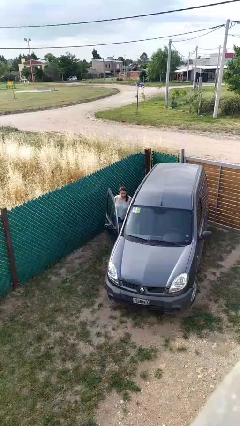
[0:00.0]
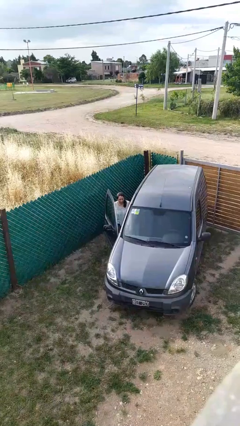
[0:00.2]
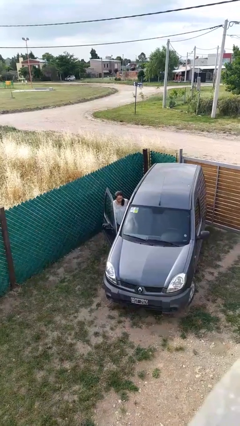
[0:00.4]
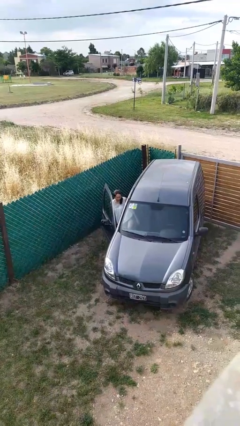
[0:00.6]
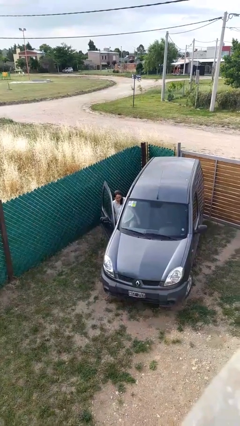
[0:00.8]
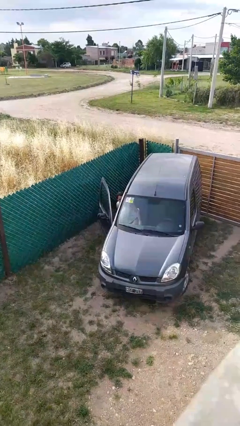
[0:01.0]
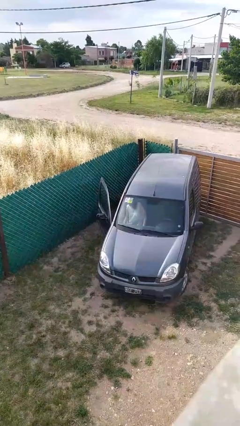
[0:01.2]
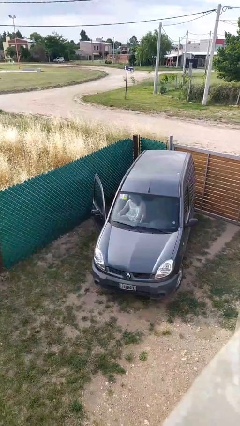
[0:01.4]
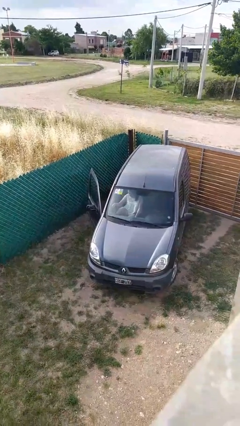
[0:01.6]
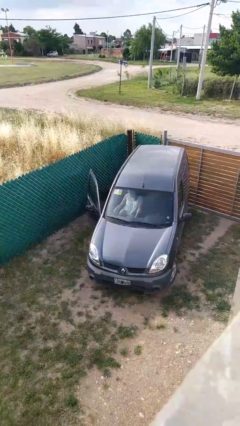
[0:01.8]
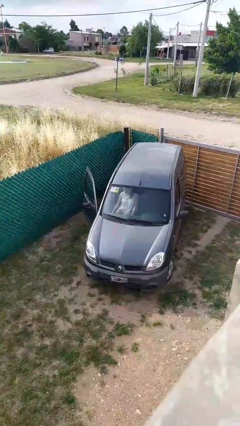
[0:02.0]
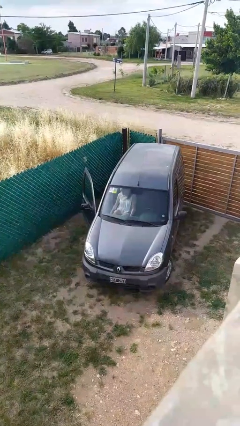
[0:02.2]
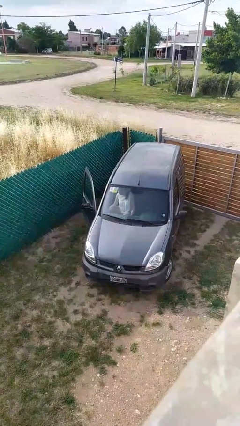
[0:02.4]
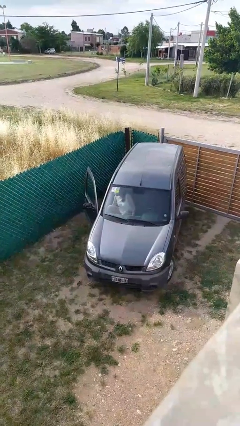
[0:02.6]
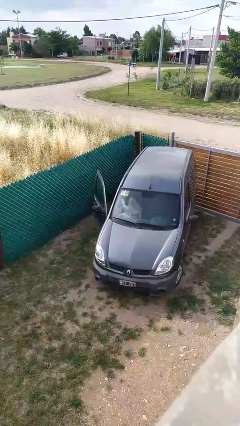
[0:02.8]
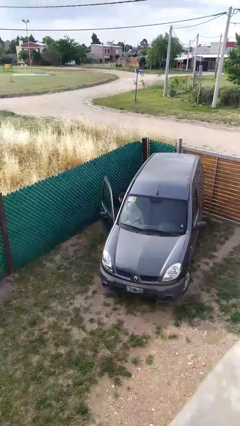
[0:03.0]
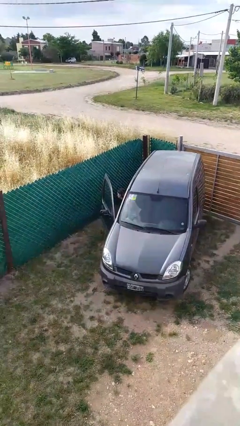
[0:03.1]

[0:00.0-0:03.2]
person enters car

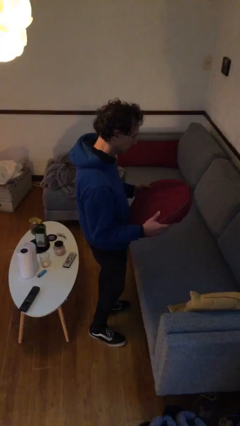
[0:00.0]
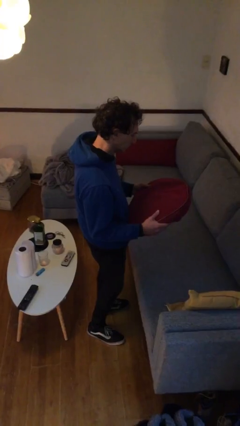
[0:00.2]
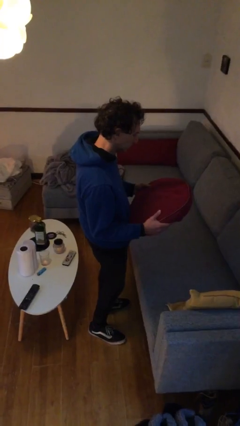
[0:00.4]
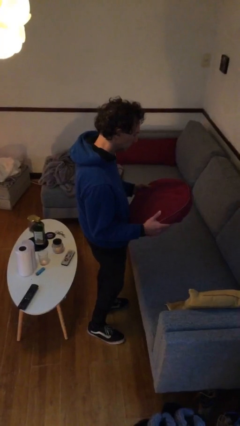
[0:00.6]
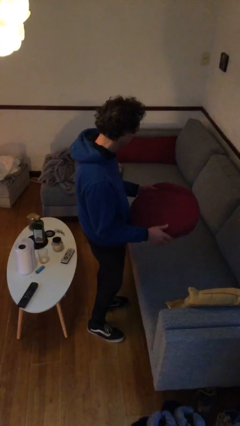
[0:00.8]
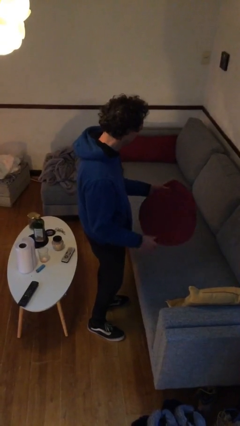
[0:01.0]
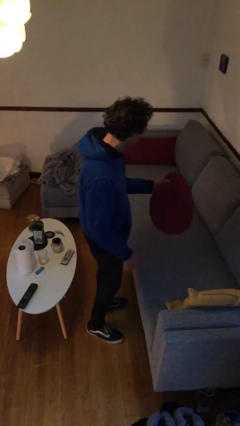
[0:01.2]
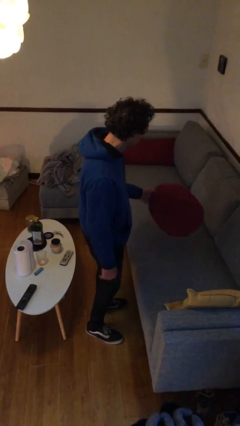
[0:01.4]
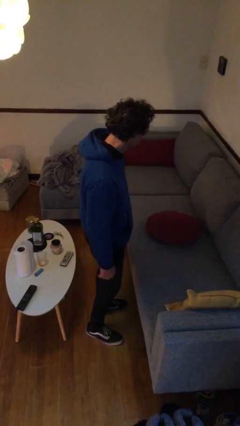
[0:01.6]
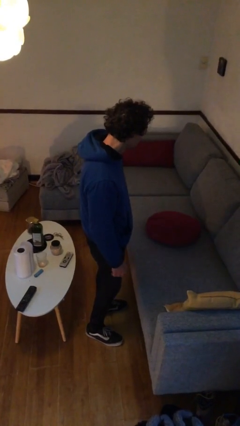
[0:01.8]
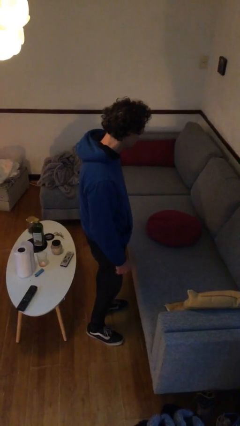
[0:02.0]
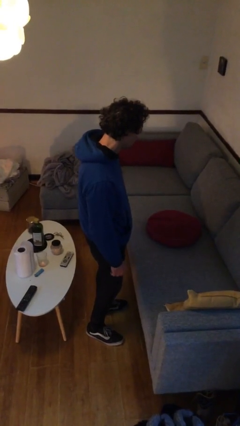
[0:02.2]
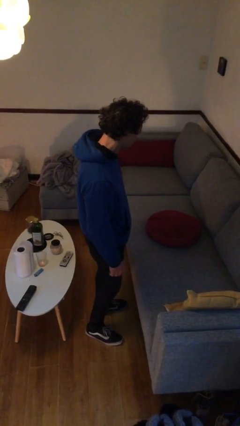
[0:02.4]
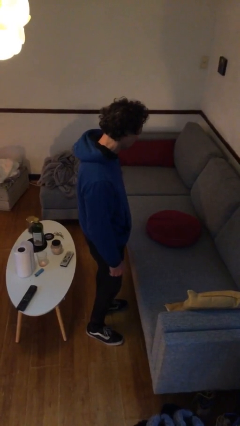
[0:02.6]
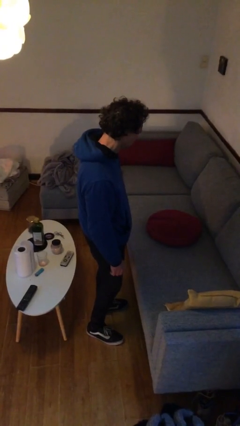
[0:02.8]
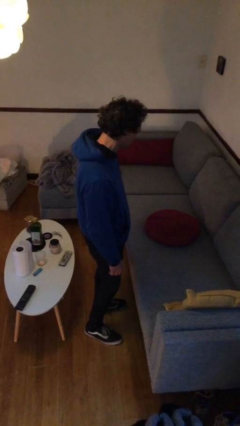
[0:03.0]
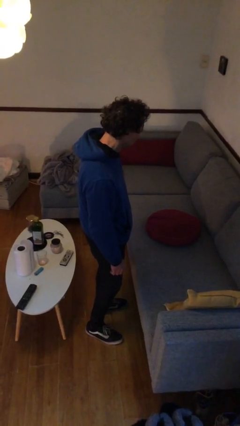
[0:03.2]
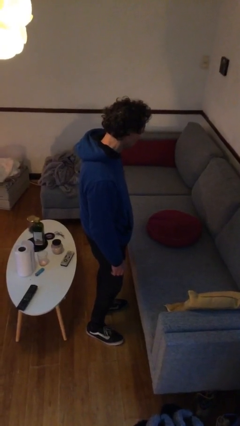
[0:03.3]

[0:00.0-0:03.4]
person puts down object on couch

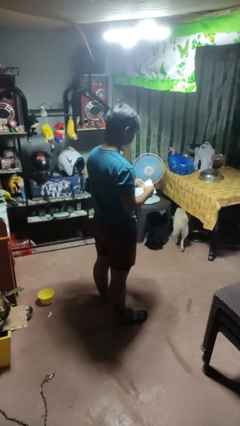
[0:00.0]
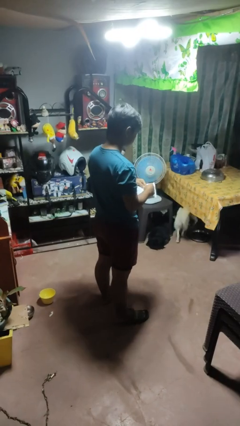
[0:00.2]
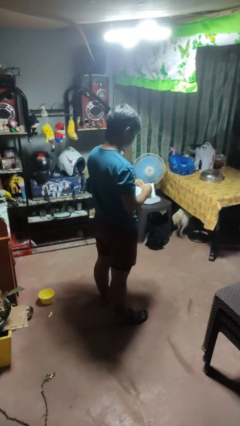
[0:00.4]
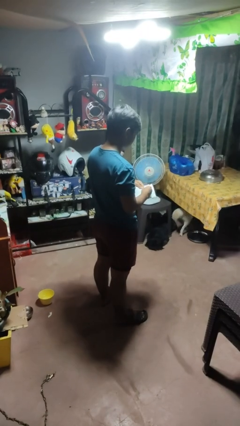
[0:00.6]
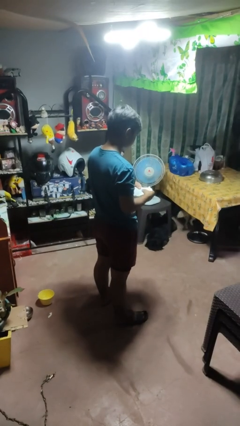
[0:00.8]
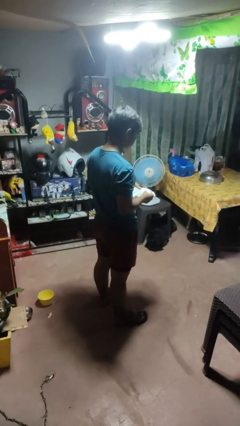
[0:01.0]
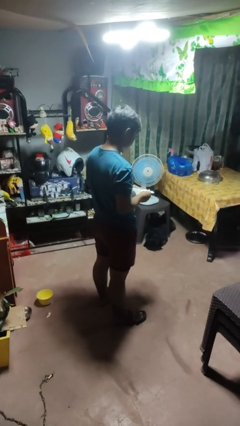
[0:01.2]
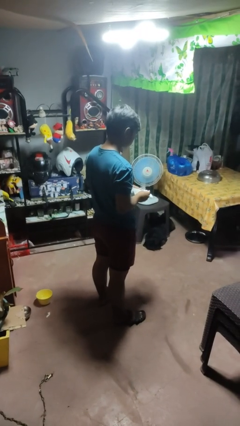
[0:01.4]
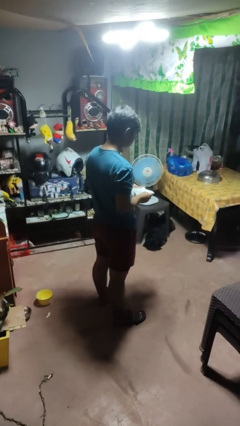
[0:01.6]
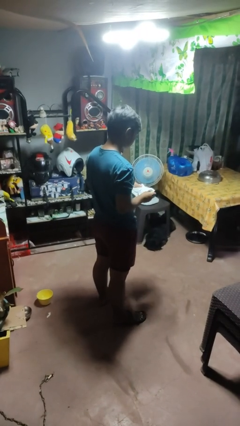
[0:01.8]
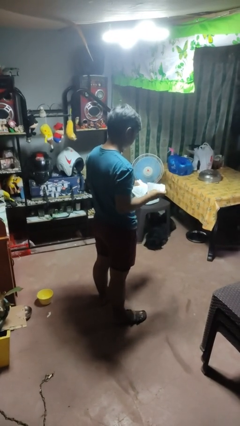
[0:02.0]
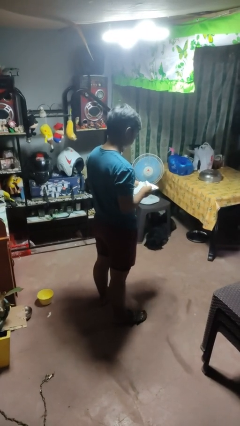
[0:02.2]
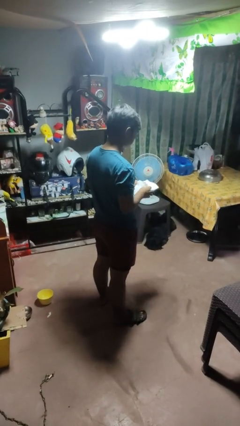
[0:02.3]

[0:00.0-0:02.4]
person tears paper

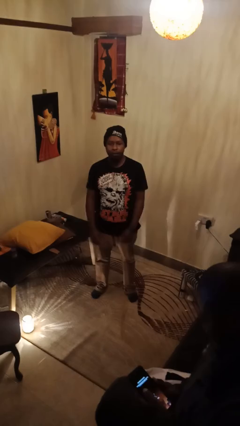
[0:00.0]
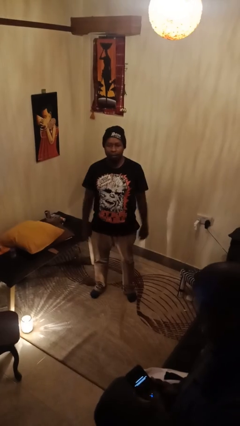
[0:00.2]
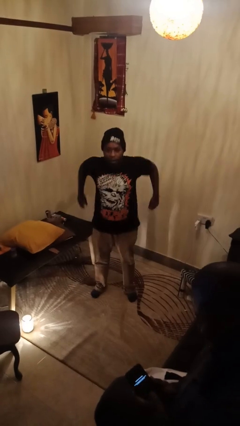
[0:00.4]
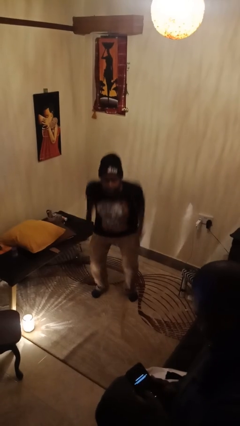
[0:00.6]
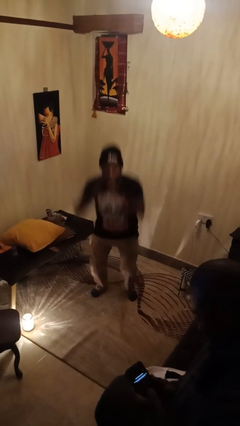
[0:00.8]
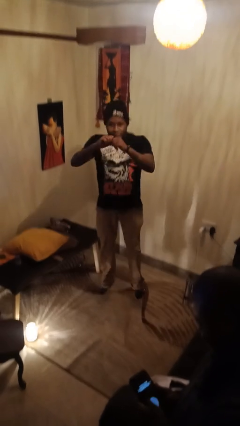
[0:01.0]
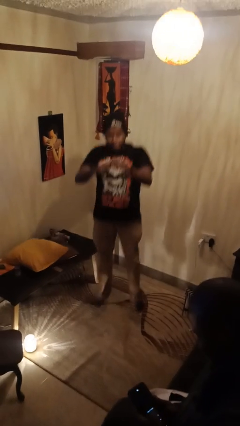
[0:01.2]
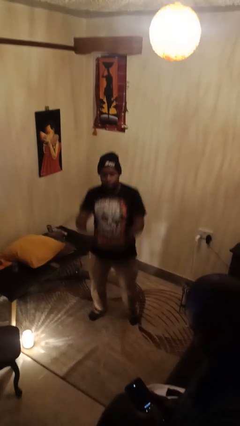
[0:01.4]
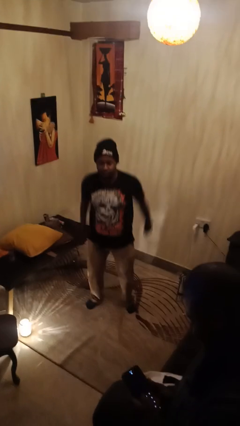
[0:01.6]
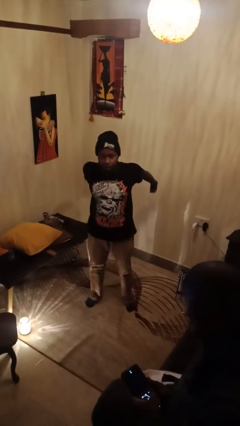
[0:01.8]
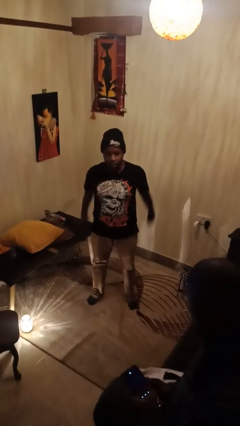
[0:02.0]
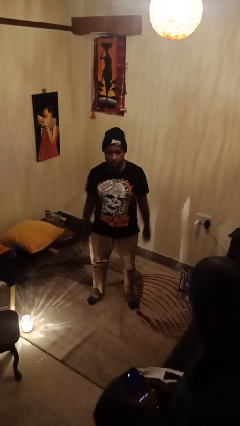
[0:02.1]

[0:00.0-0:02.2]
person jumps

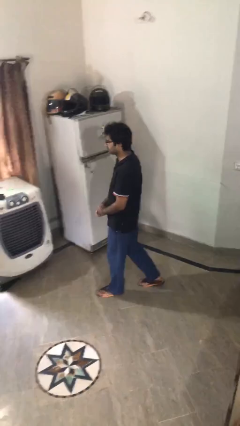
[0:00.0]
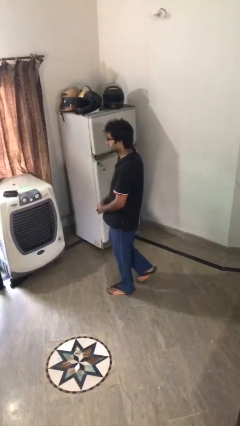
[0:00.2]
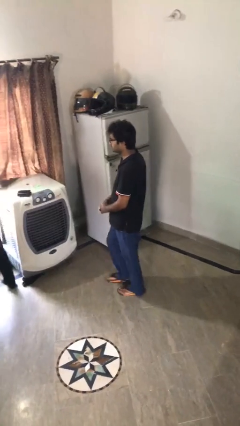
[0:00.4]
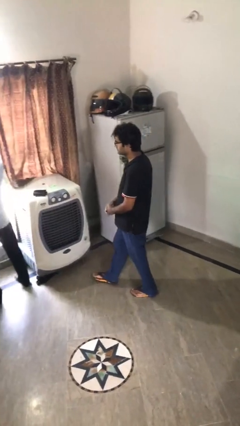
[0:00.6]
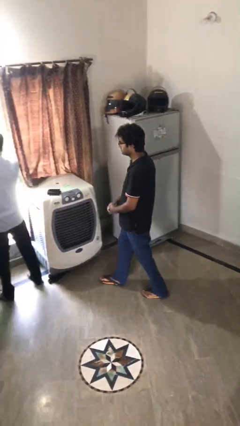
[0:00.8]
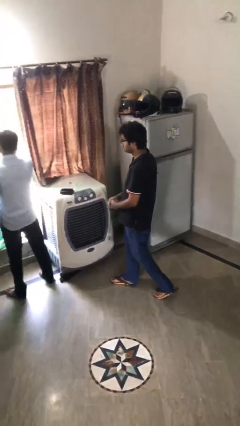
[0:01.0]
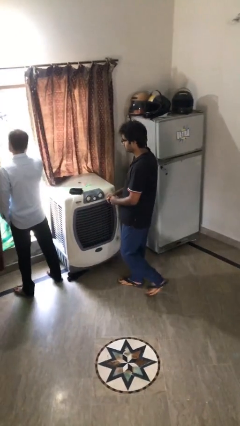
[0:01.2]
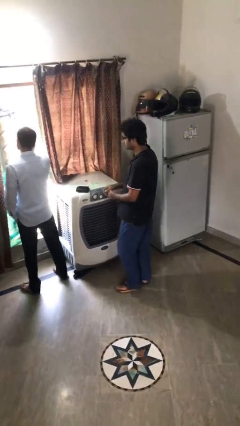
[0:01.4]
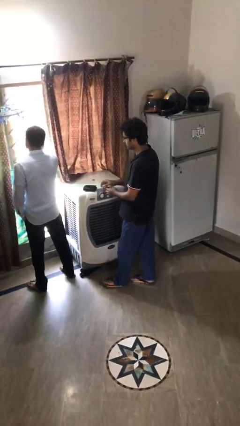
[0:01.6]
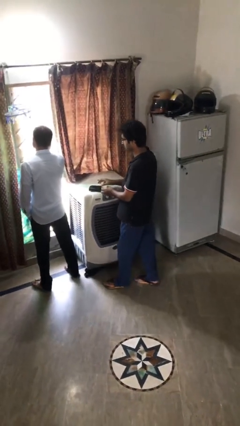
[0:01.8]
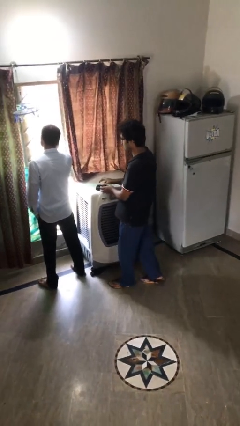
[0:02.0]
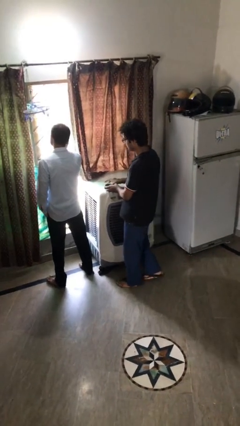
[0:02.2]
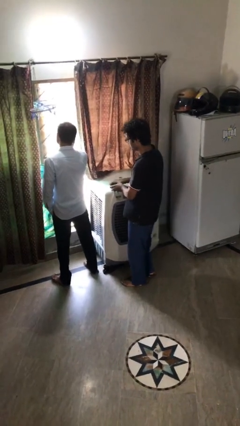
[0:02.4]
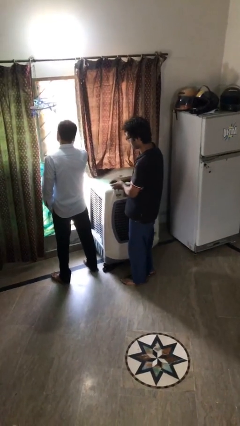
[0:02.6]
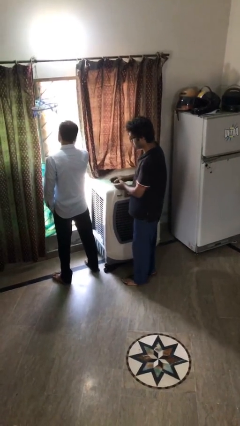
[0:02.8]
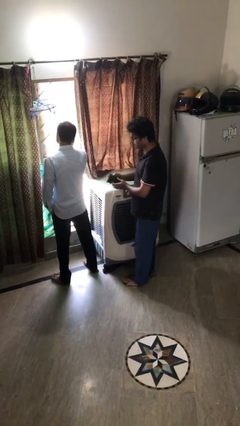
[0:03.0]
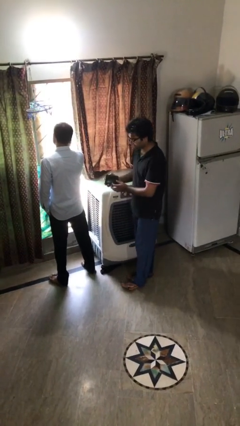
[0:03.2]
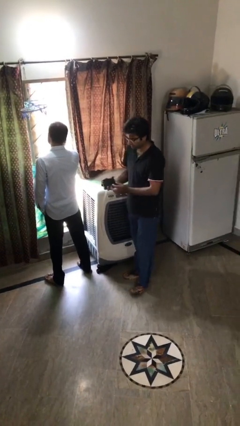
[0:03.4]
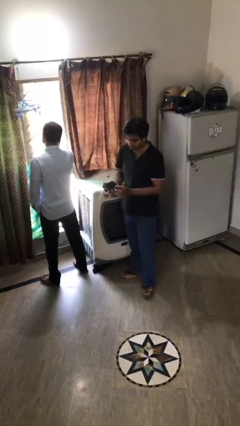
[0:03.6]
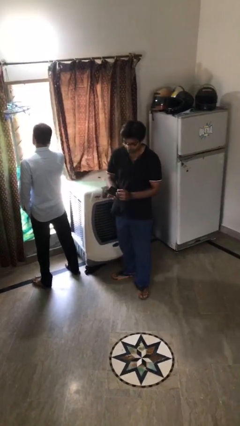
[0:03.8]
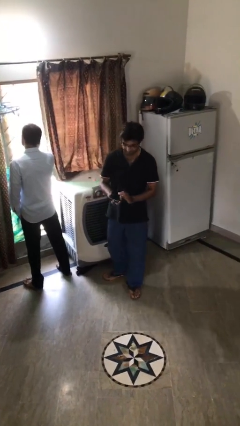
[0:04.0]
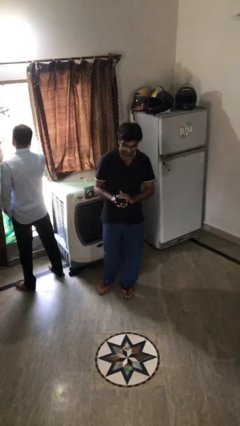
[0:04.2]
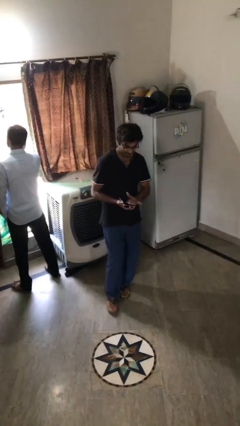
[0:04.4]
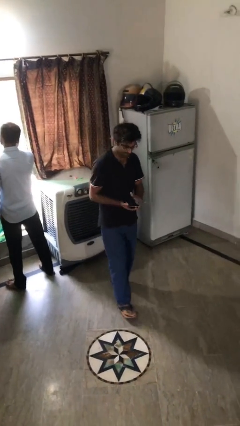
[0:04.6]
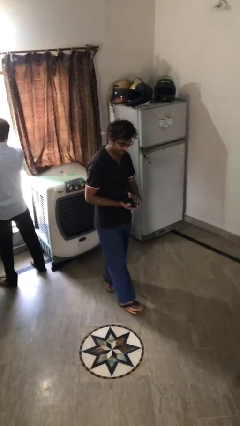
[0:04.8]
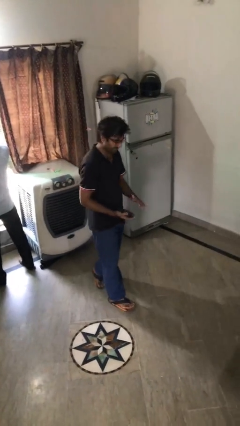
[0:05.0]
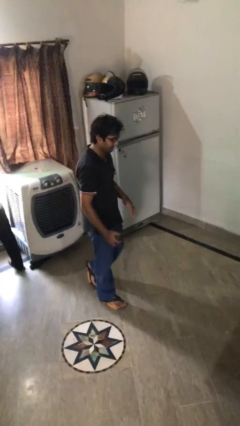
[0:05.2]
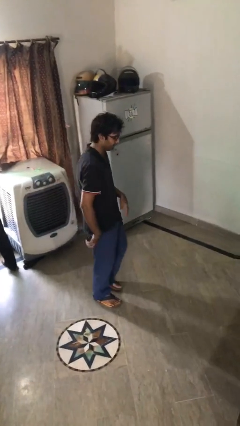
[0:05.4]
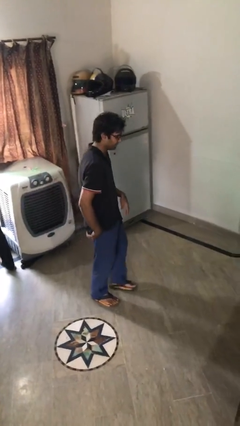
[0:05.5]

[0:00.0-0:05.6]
person steals object from person

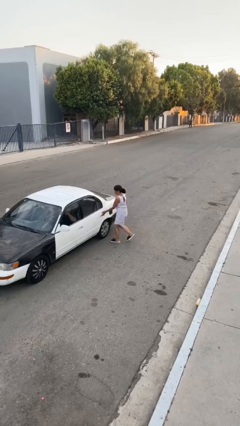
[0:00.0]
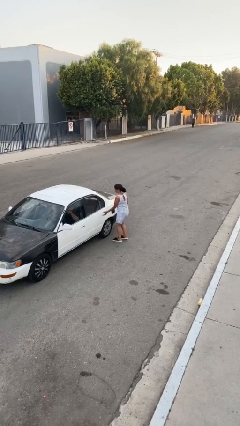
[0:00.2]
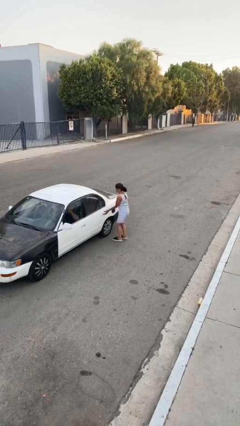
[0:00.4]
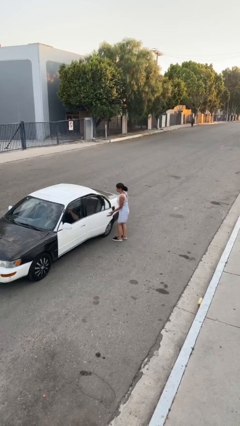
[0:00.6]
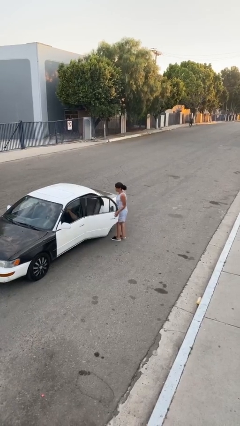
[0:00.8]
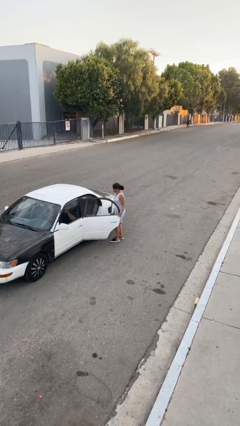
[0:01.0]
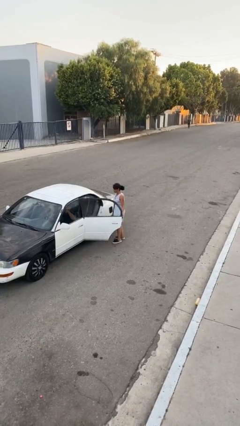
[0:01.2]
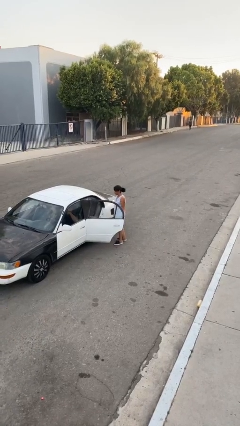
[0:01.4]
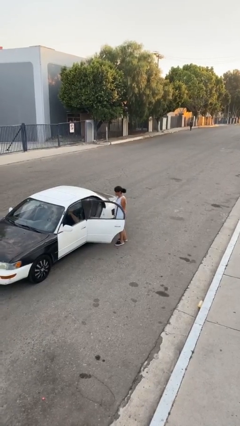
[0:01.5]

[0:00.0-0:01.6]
person opens car door
